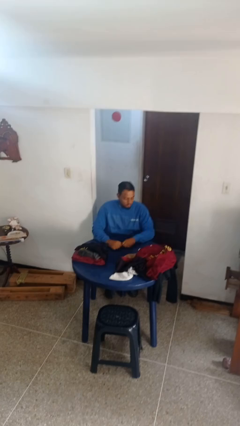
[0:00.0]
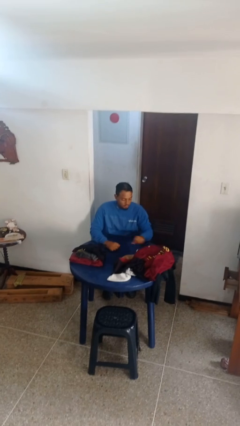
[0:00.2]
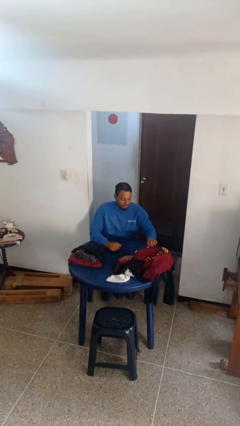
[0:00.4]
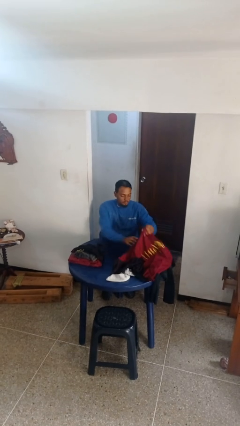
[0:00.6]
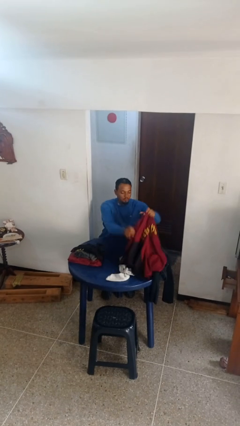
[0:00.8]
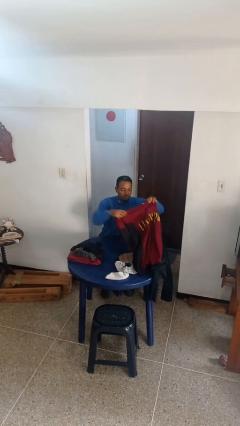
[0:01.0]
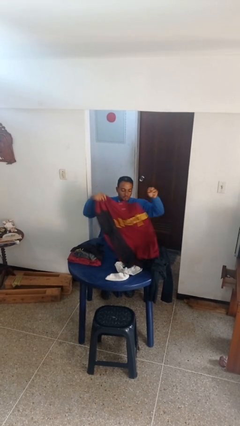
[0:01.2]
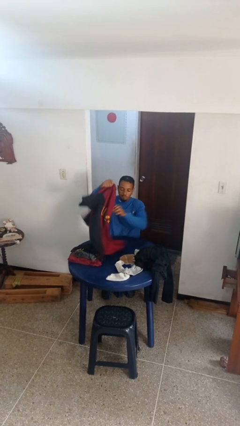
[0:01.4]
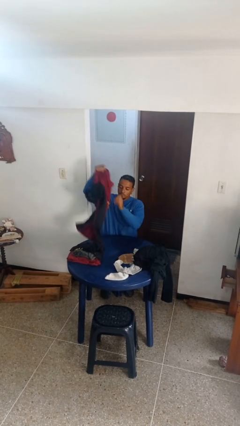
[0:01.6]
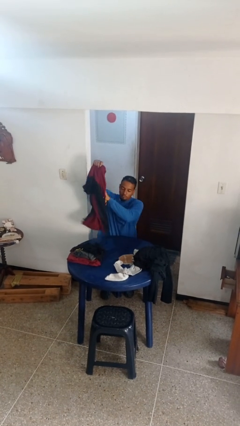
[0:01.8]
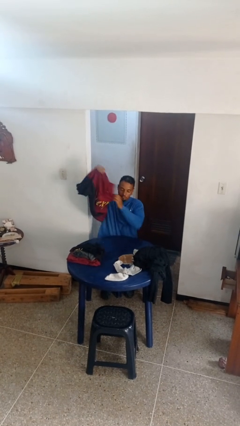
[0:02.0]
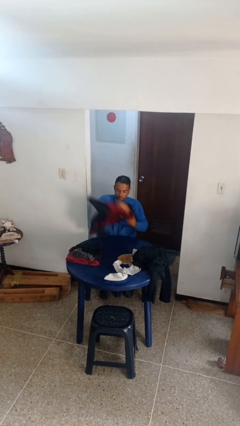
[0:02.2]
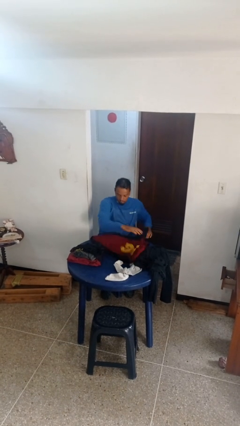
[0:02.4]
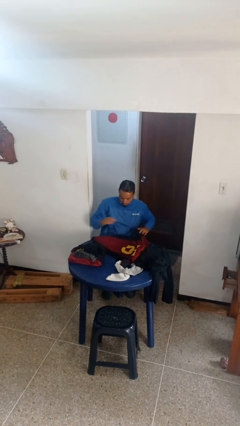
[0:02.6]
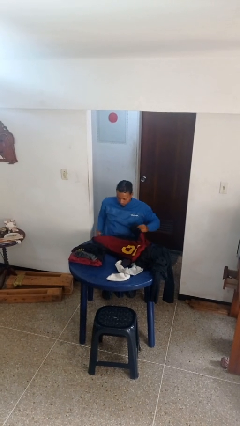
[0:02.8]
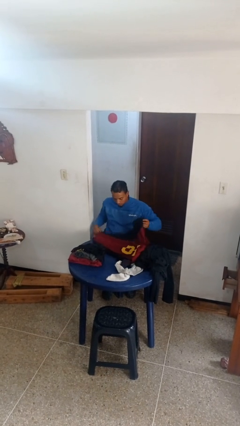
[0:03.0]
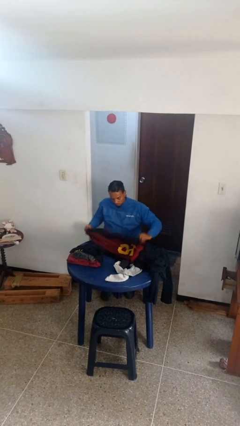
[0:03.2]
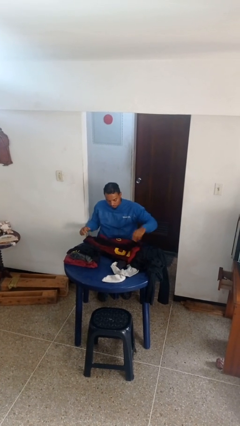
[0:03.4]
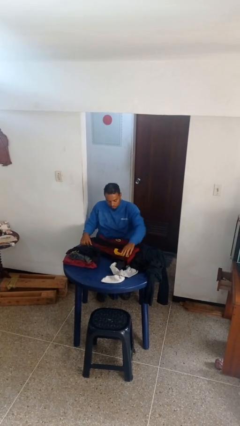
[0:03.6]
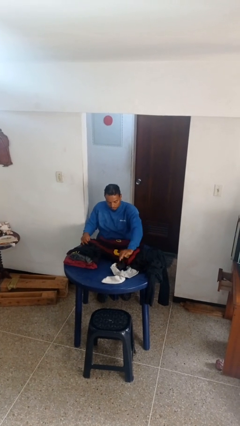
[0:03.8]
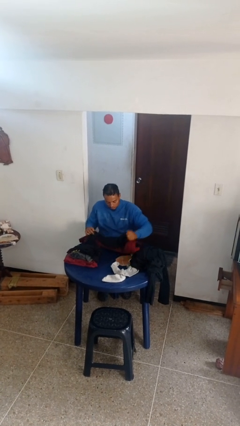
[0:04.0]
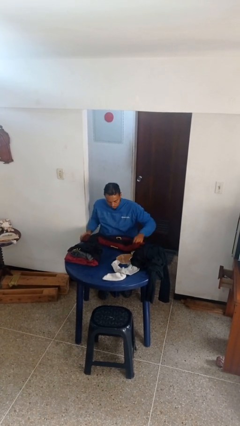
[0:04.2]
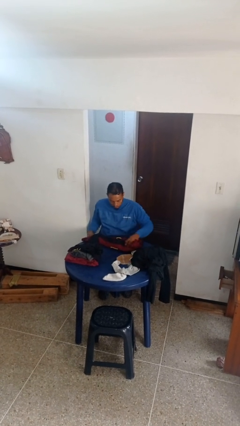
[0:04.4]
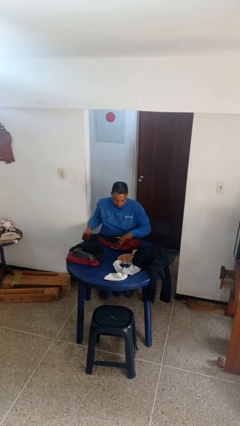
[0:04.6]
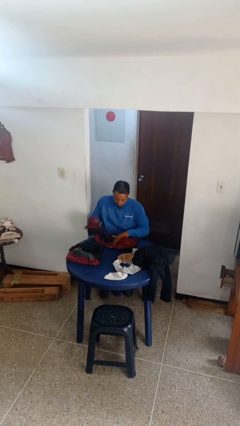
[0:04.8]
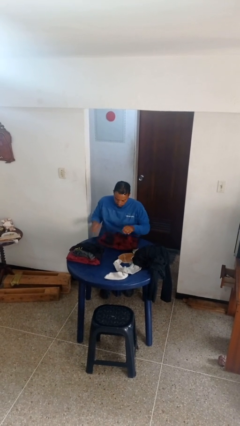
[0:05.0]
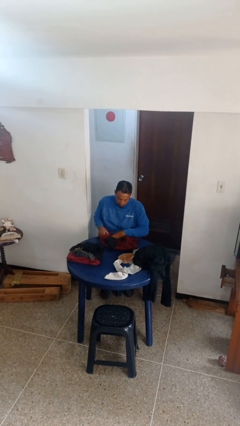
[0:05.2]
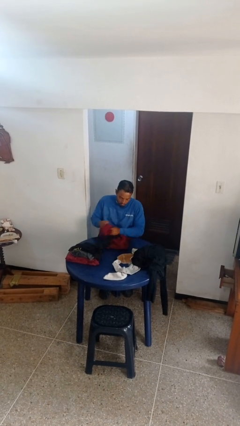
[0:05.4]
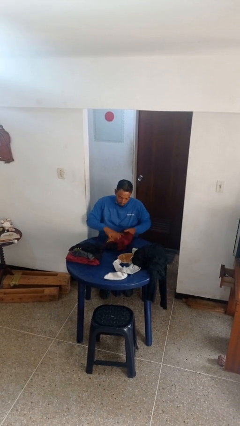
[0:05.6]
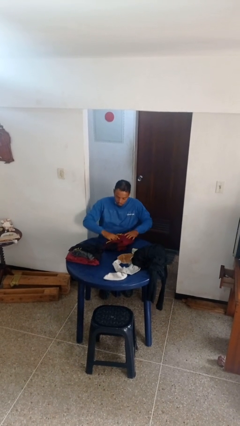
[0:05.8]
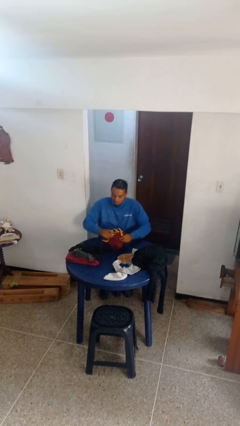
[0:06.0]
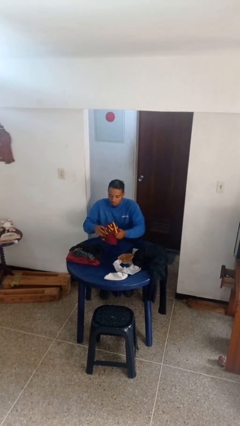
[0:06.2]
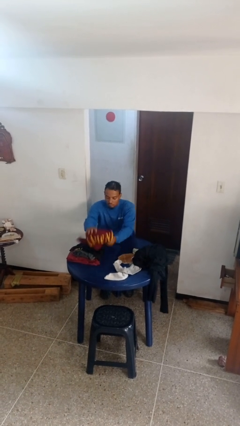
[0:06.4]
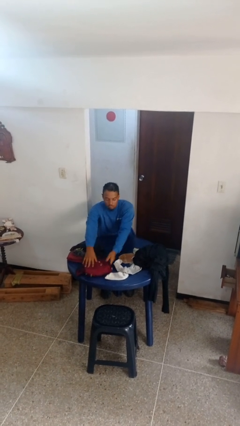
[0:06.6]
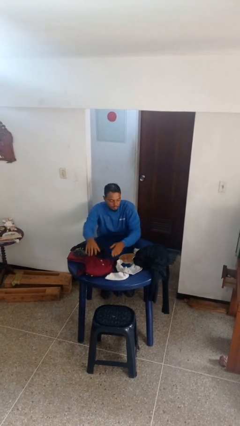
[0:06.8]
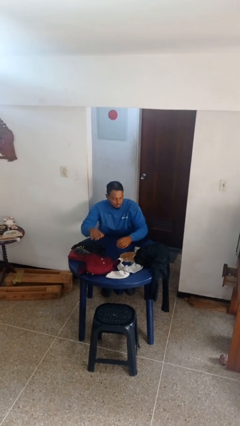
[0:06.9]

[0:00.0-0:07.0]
person folds shirt

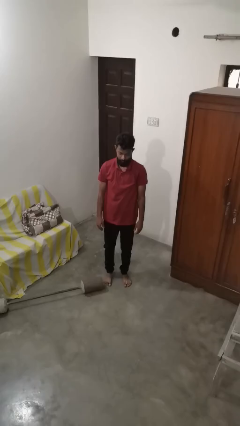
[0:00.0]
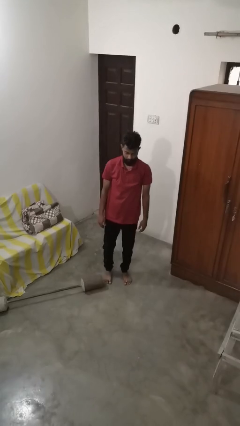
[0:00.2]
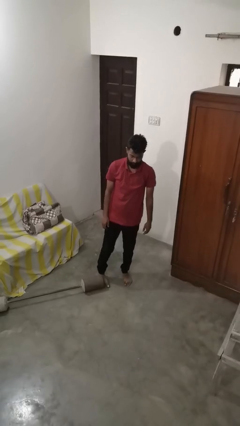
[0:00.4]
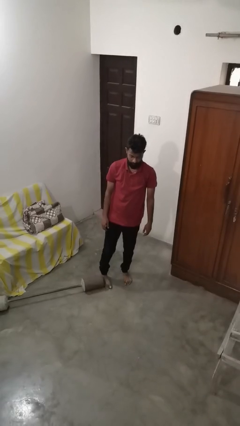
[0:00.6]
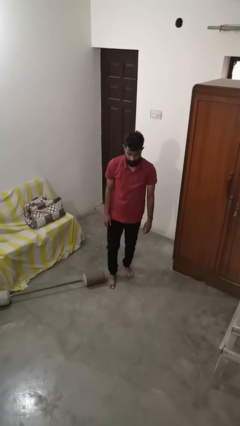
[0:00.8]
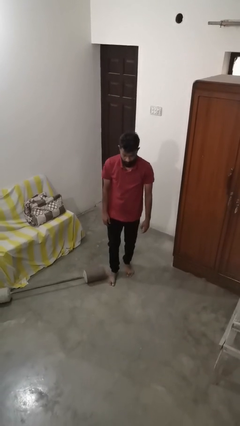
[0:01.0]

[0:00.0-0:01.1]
person trips on object on floor

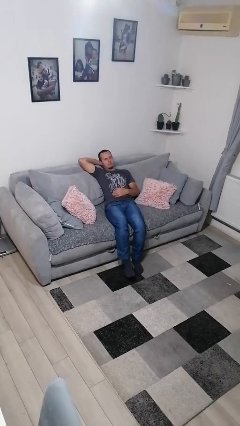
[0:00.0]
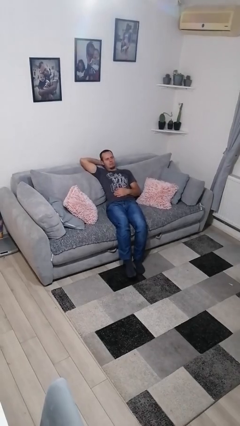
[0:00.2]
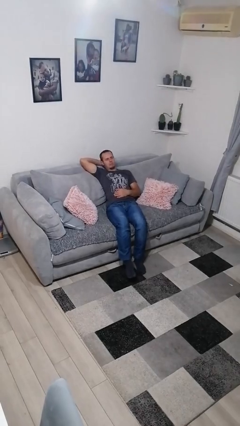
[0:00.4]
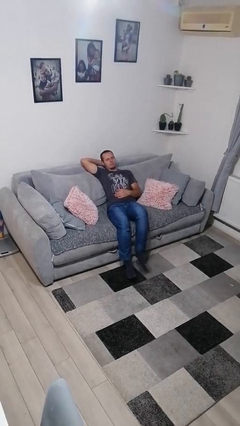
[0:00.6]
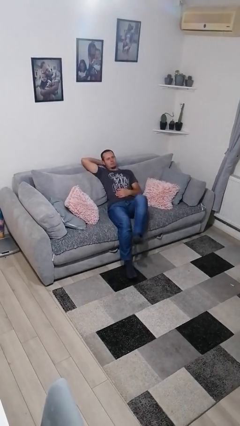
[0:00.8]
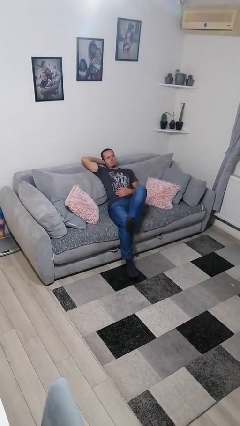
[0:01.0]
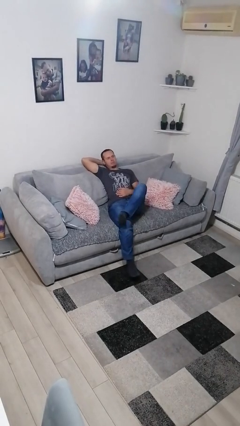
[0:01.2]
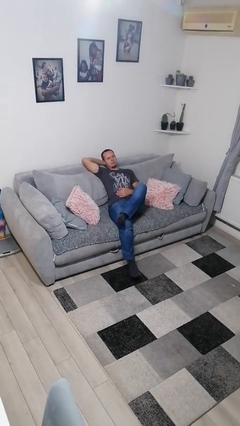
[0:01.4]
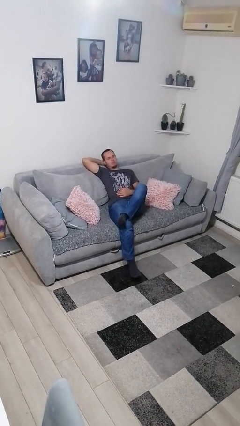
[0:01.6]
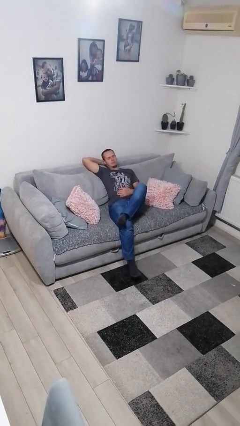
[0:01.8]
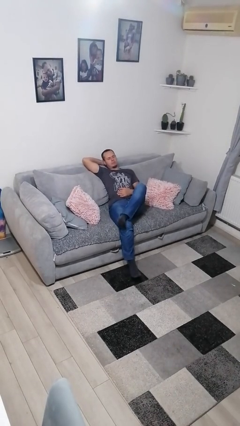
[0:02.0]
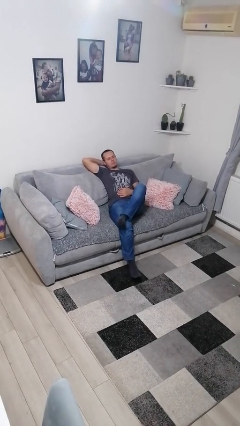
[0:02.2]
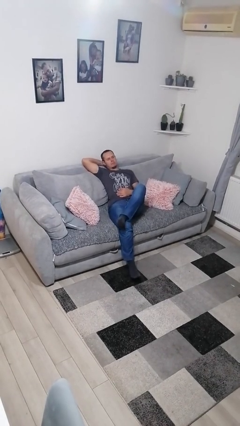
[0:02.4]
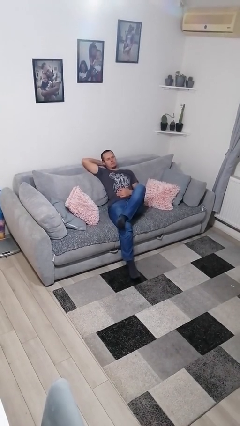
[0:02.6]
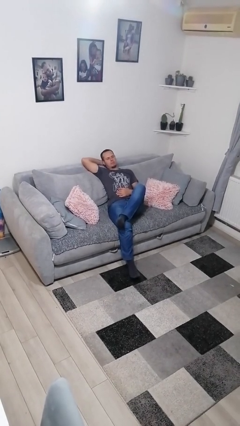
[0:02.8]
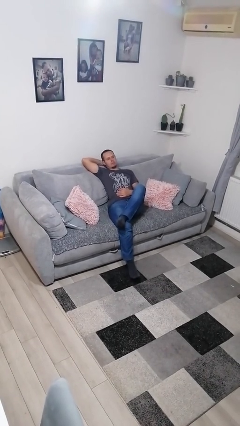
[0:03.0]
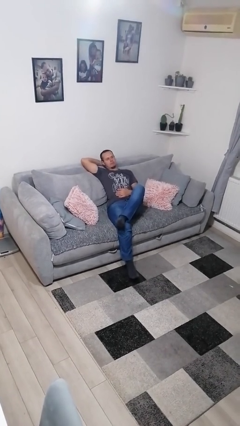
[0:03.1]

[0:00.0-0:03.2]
person crosses legs

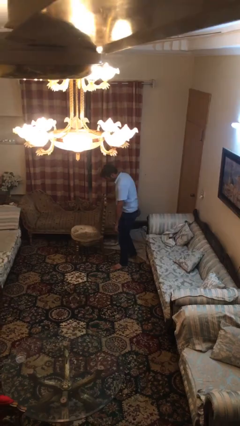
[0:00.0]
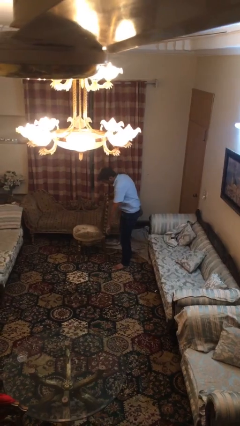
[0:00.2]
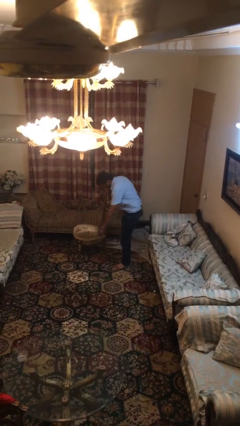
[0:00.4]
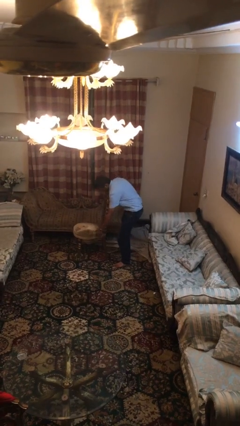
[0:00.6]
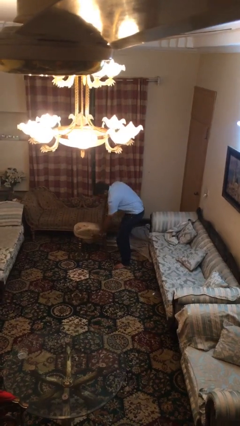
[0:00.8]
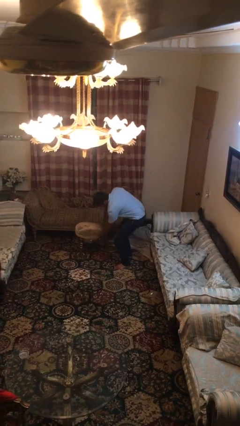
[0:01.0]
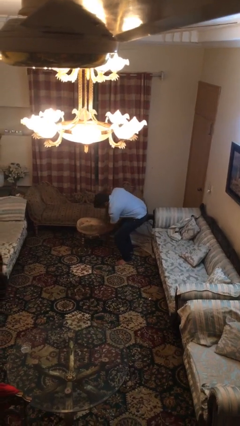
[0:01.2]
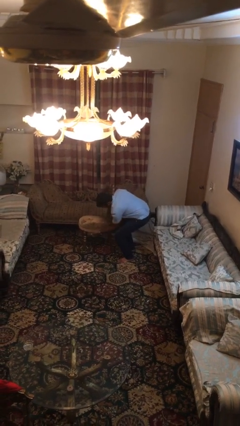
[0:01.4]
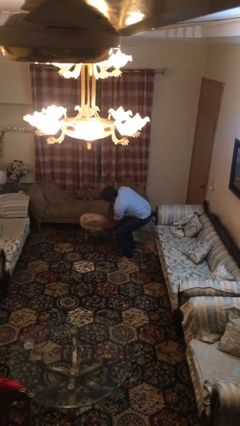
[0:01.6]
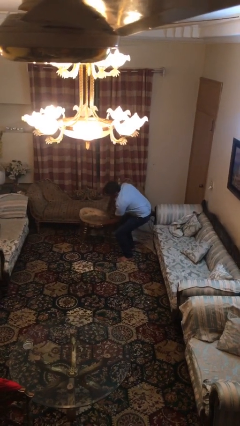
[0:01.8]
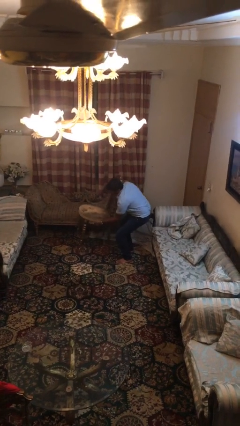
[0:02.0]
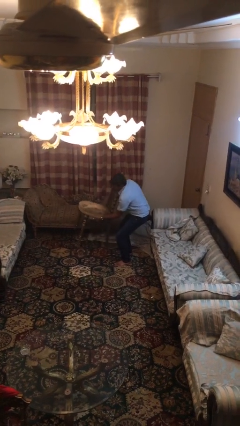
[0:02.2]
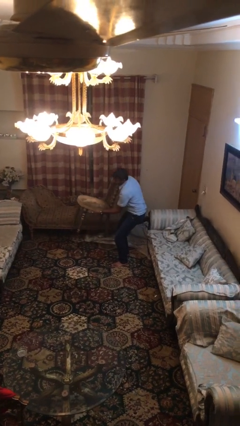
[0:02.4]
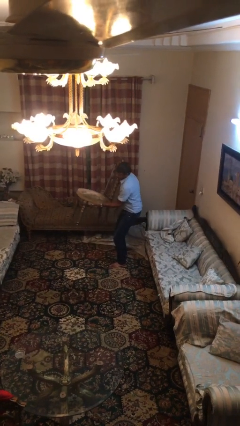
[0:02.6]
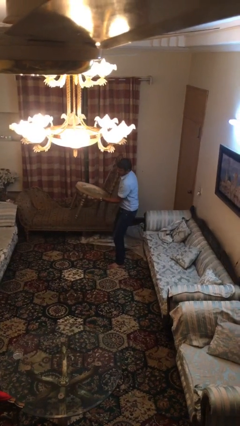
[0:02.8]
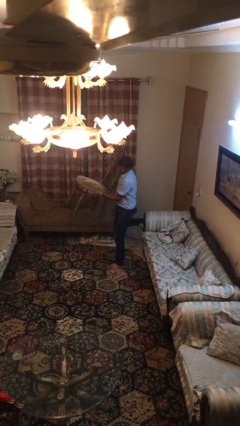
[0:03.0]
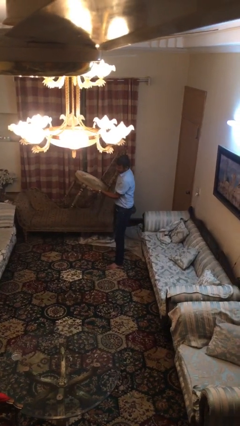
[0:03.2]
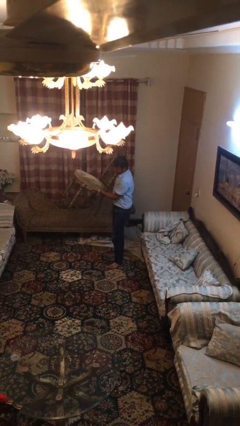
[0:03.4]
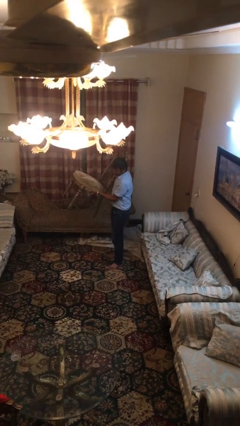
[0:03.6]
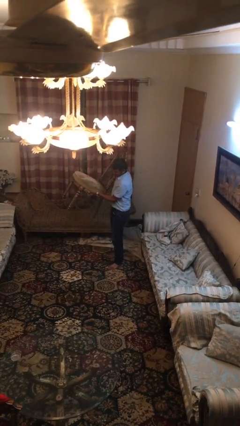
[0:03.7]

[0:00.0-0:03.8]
person picks up object from floor

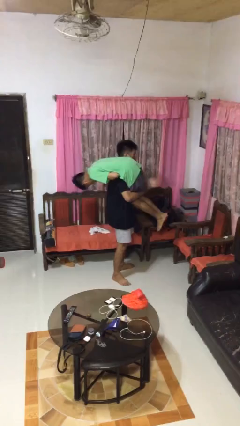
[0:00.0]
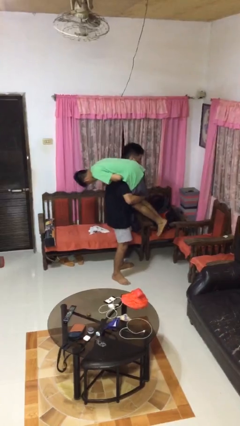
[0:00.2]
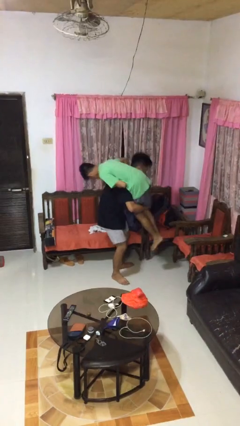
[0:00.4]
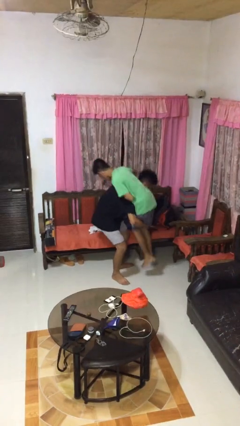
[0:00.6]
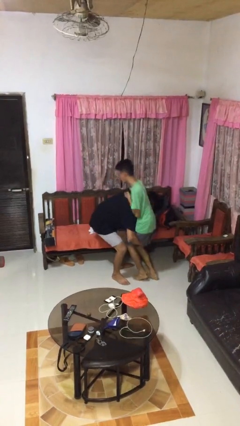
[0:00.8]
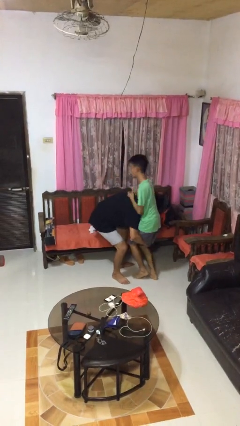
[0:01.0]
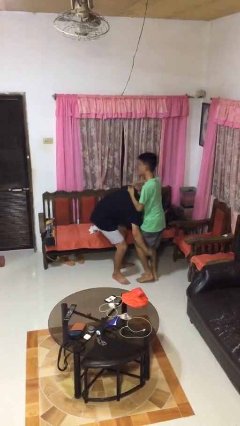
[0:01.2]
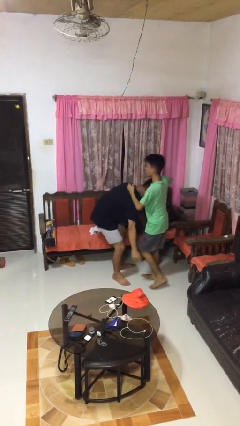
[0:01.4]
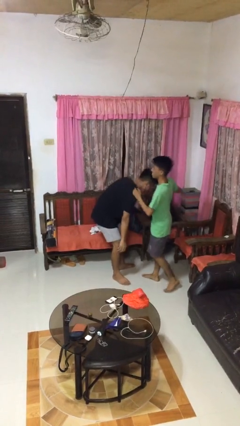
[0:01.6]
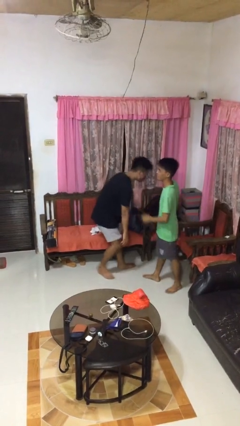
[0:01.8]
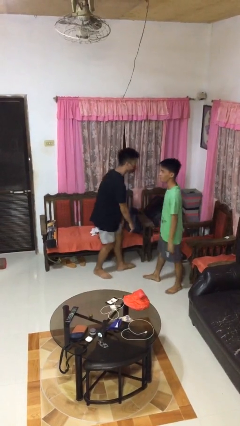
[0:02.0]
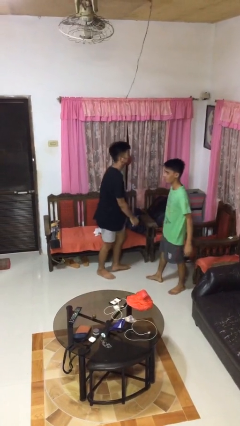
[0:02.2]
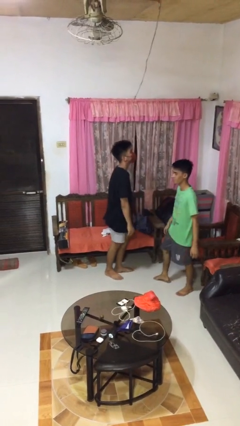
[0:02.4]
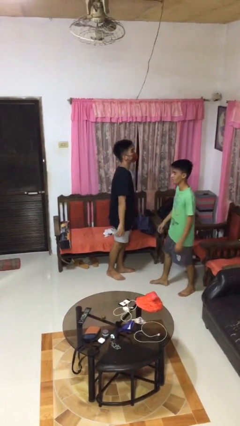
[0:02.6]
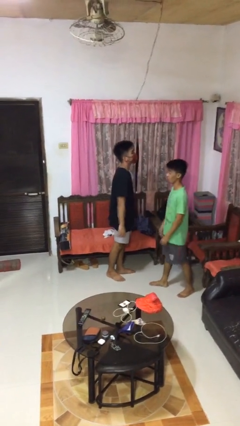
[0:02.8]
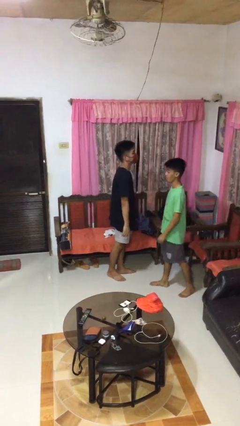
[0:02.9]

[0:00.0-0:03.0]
person puts down person
